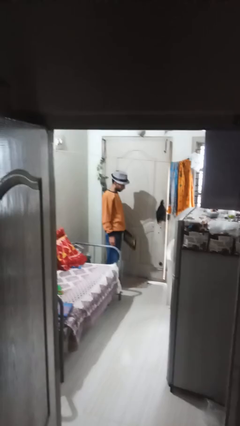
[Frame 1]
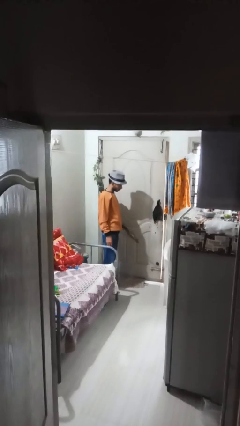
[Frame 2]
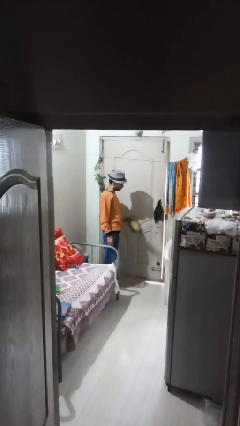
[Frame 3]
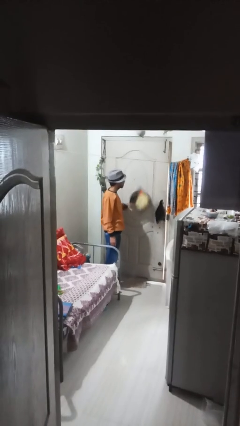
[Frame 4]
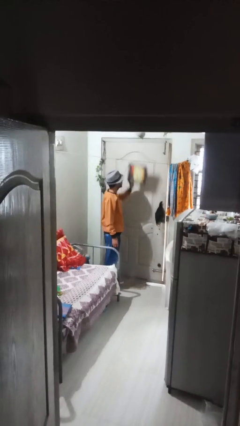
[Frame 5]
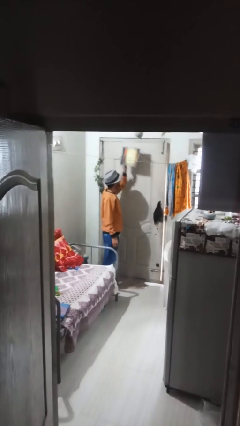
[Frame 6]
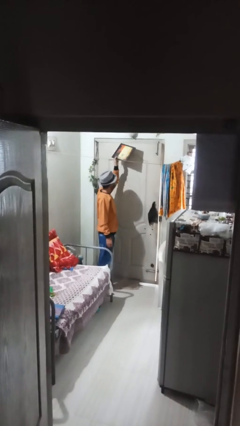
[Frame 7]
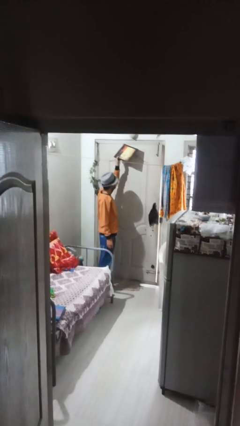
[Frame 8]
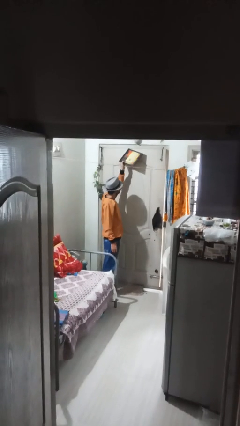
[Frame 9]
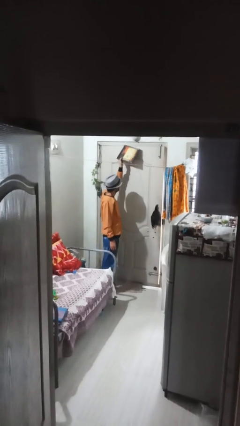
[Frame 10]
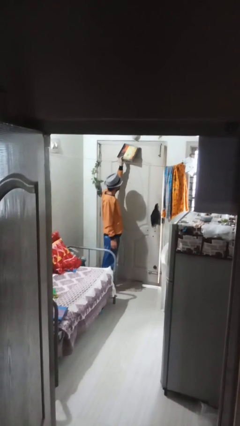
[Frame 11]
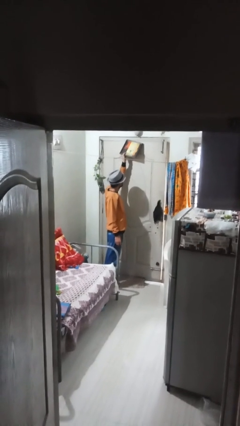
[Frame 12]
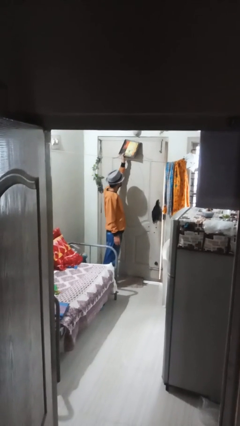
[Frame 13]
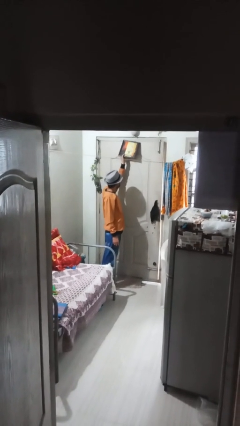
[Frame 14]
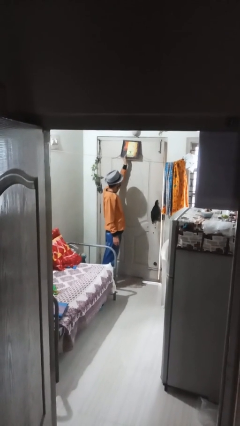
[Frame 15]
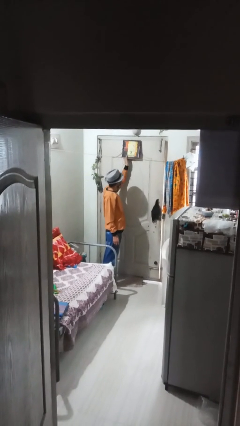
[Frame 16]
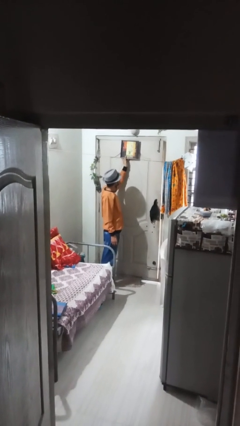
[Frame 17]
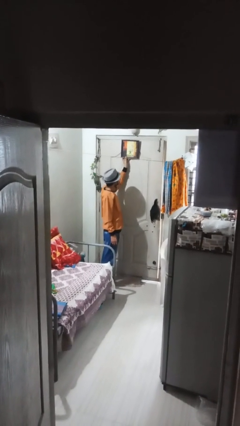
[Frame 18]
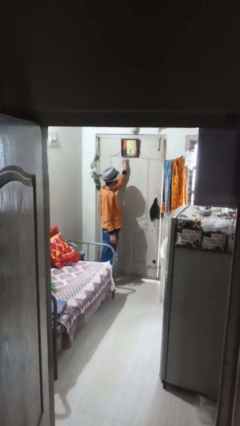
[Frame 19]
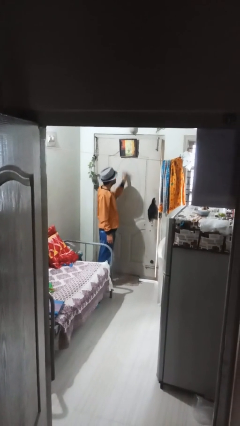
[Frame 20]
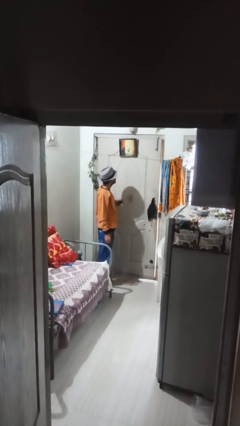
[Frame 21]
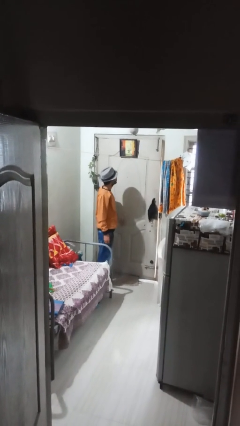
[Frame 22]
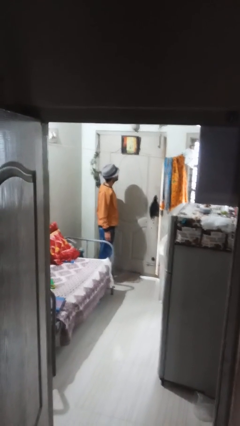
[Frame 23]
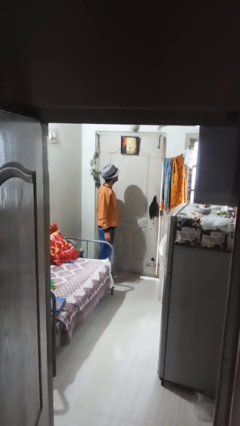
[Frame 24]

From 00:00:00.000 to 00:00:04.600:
person puts up picture frame

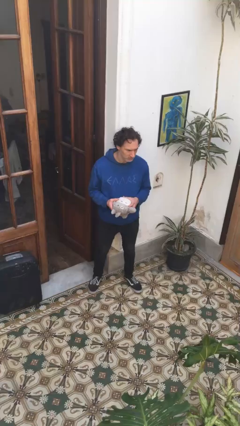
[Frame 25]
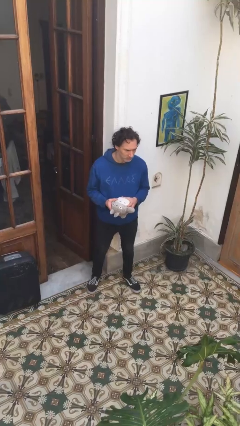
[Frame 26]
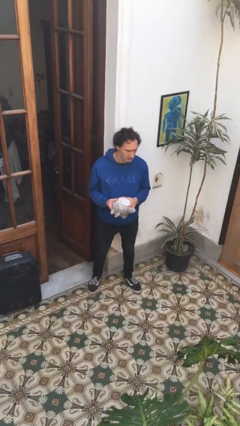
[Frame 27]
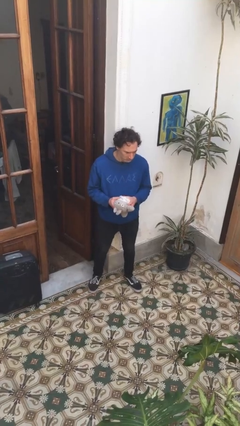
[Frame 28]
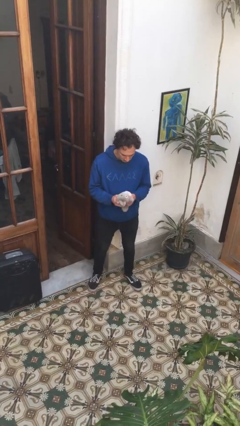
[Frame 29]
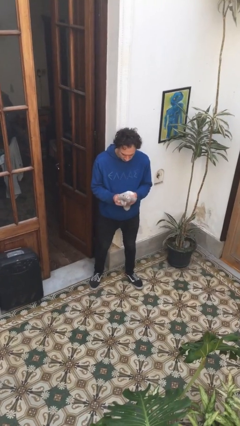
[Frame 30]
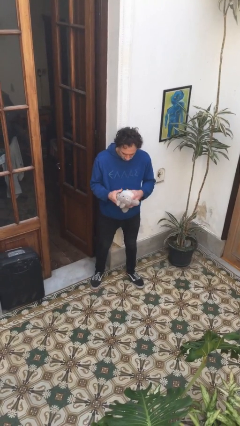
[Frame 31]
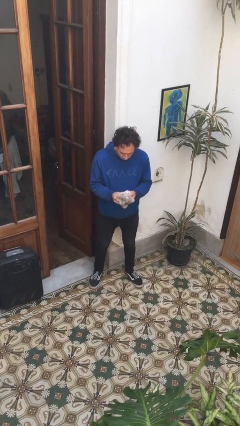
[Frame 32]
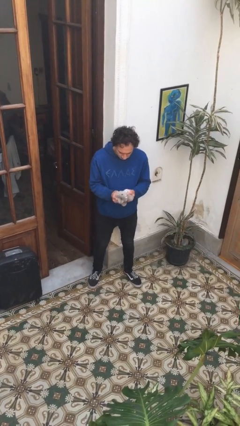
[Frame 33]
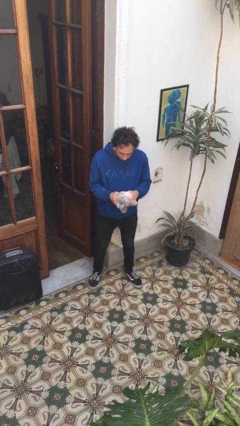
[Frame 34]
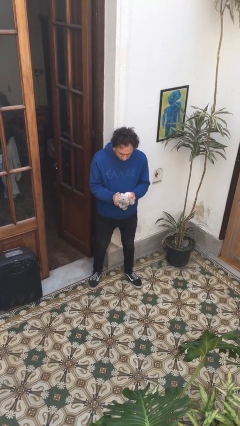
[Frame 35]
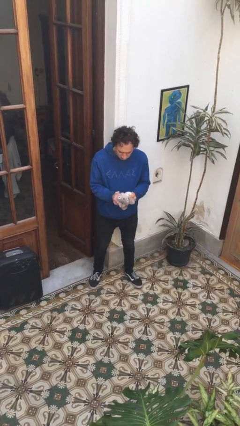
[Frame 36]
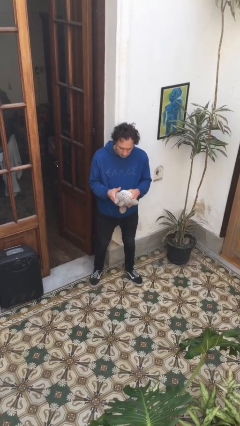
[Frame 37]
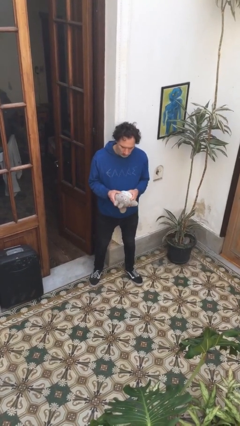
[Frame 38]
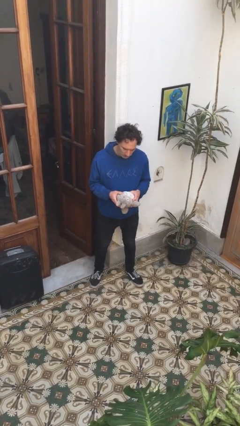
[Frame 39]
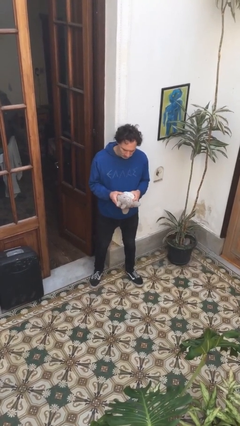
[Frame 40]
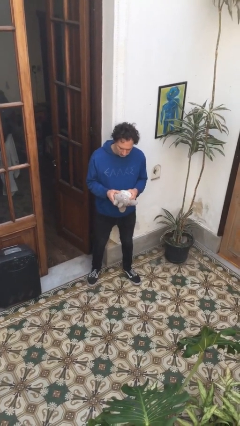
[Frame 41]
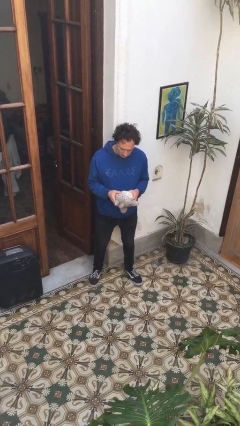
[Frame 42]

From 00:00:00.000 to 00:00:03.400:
person squeezes object

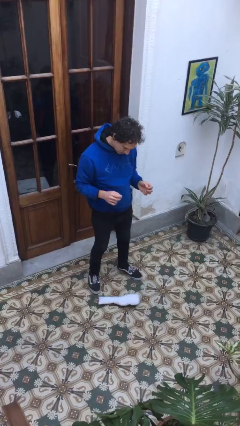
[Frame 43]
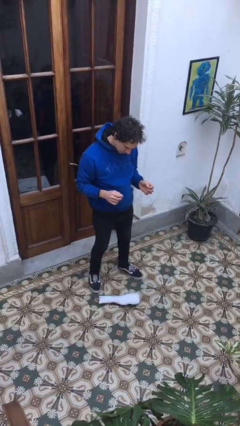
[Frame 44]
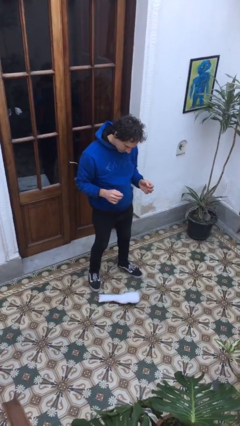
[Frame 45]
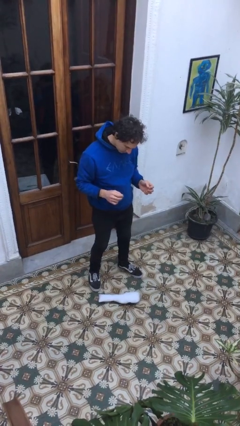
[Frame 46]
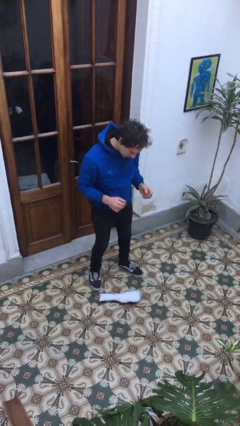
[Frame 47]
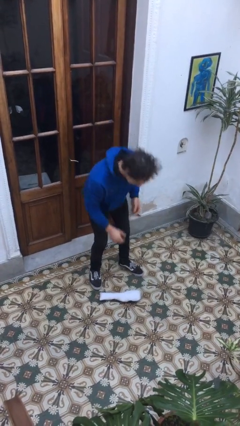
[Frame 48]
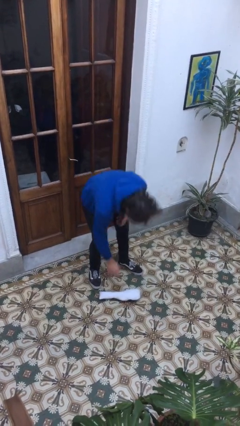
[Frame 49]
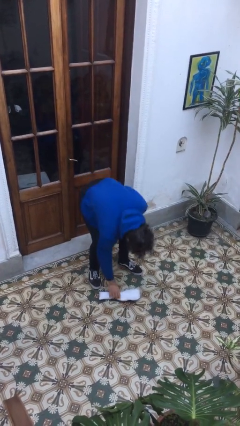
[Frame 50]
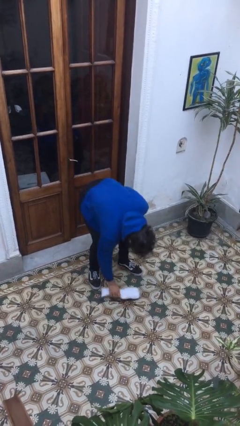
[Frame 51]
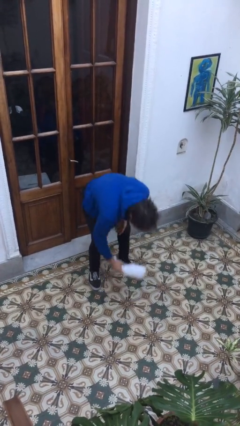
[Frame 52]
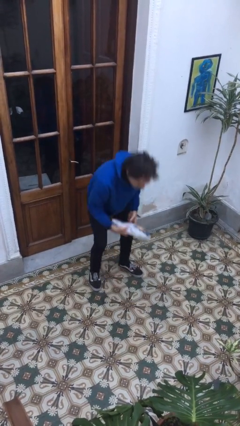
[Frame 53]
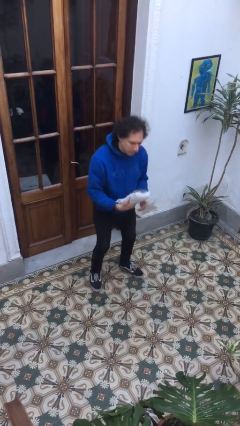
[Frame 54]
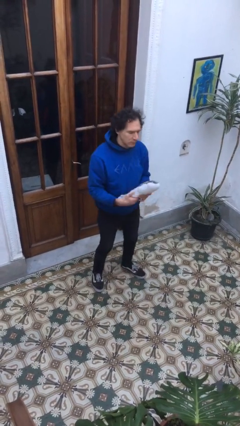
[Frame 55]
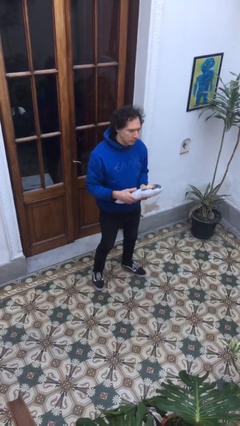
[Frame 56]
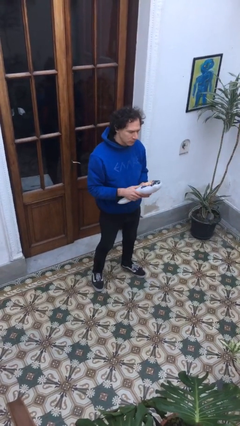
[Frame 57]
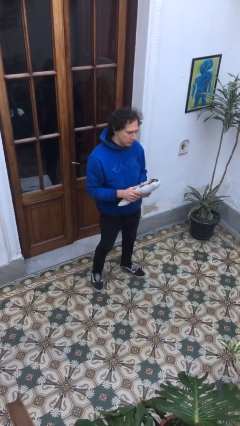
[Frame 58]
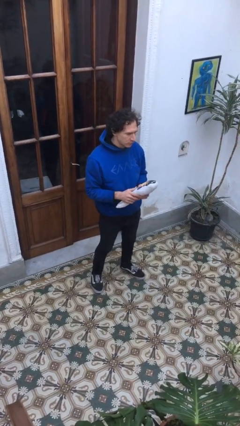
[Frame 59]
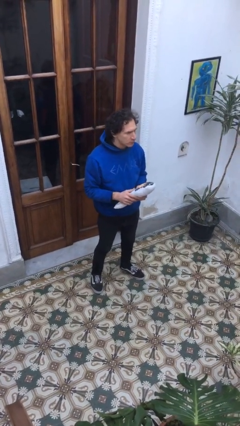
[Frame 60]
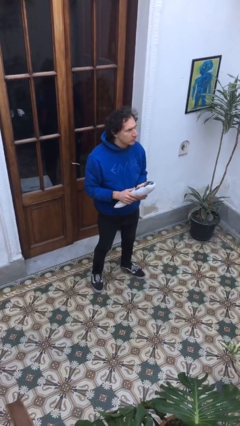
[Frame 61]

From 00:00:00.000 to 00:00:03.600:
person picks up object from floor

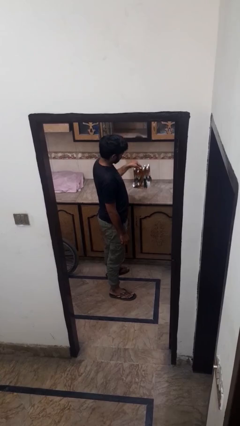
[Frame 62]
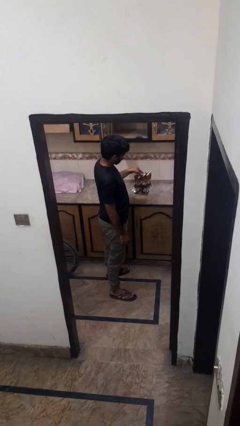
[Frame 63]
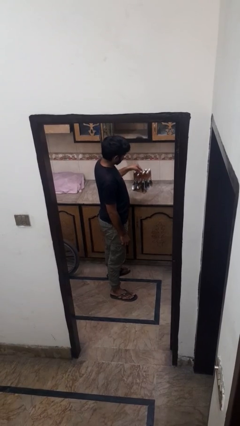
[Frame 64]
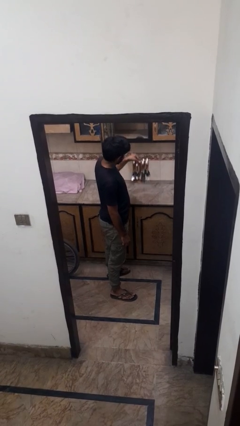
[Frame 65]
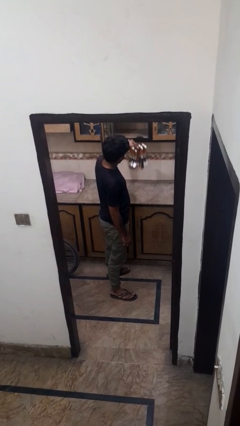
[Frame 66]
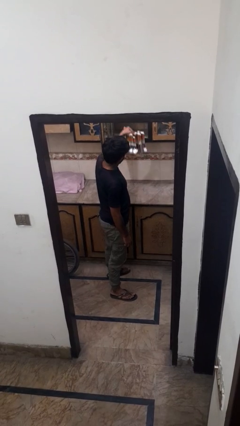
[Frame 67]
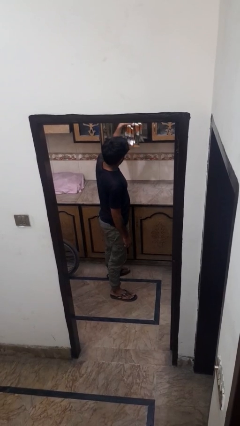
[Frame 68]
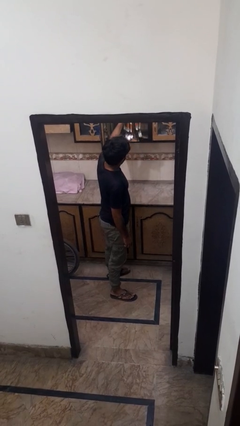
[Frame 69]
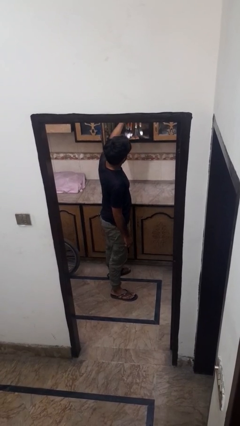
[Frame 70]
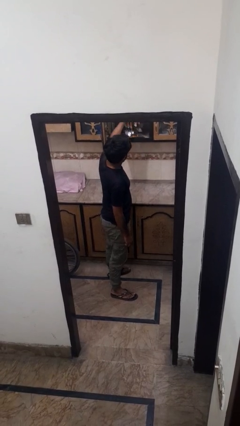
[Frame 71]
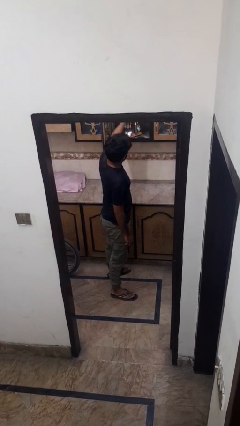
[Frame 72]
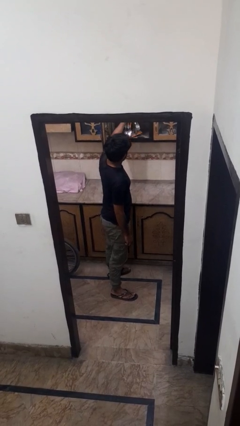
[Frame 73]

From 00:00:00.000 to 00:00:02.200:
person puts down object into cabinet

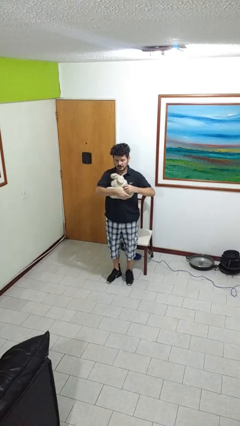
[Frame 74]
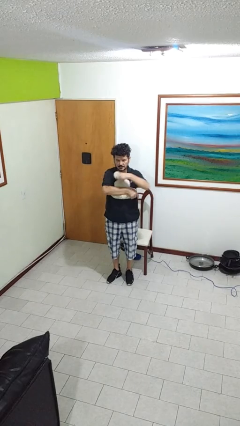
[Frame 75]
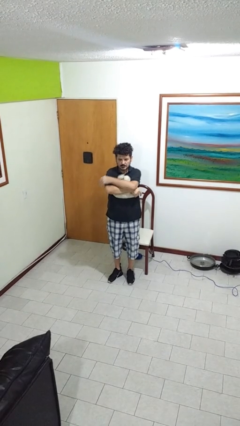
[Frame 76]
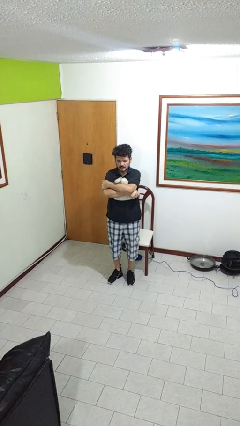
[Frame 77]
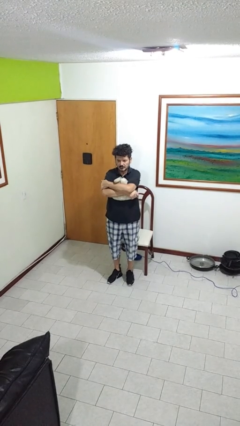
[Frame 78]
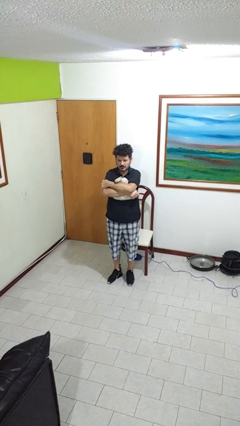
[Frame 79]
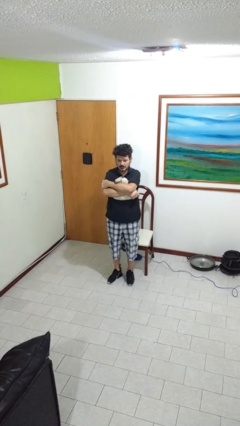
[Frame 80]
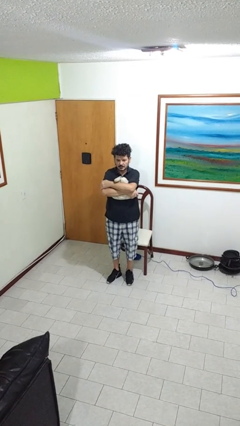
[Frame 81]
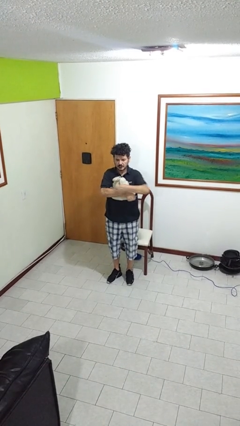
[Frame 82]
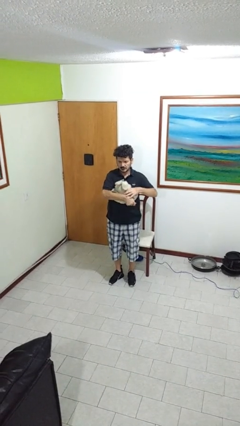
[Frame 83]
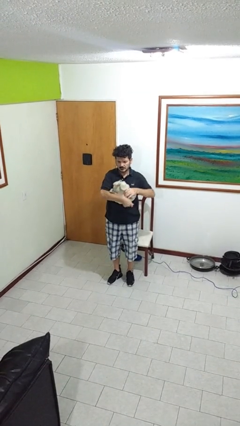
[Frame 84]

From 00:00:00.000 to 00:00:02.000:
person hugs stuffed animal

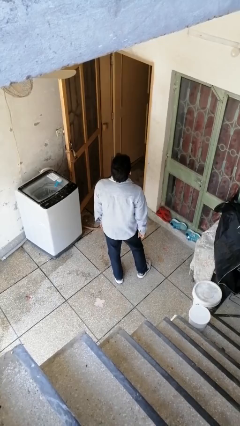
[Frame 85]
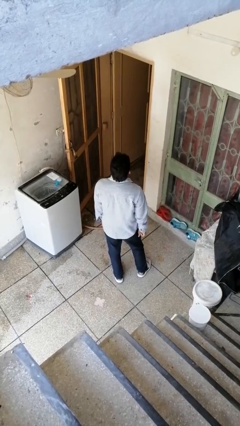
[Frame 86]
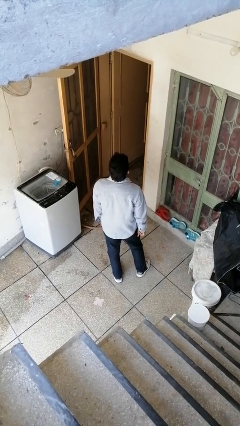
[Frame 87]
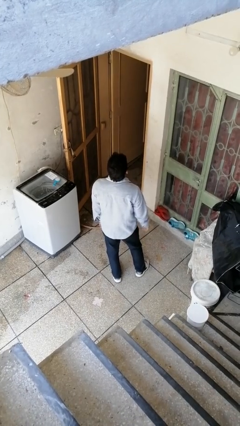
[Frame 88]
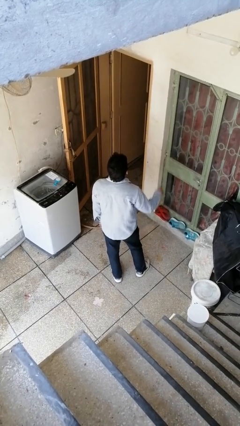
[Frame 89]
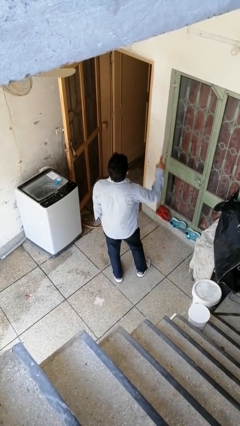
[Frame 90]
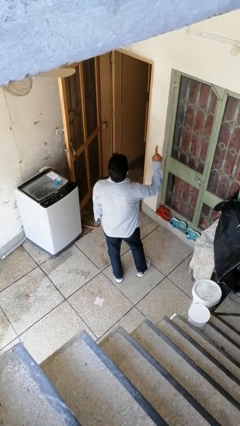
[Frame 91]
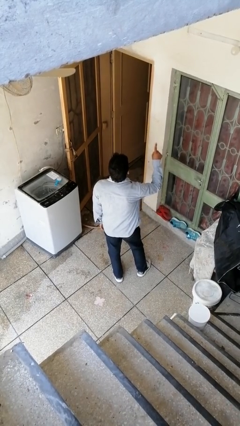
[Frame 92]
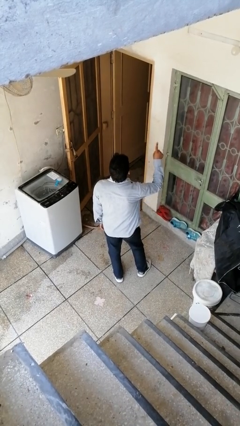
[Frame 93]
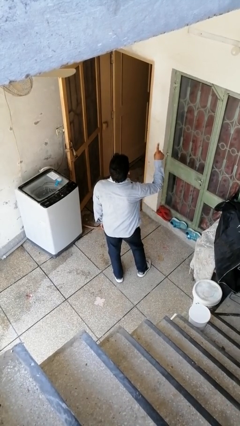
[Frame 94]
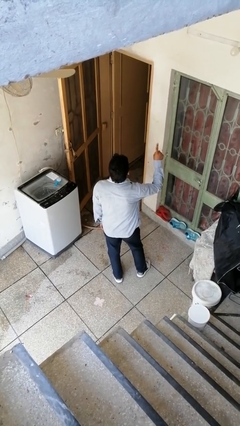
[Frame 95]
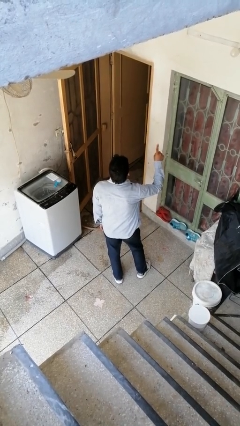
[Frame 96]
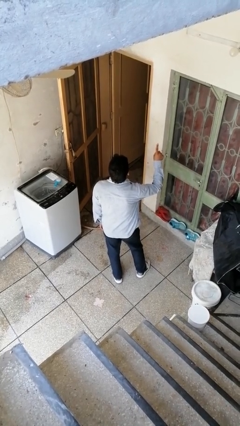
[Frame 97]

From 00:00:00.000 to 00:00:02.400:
person gestures number one
